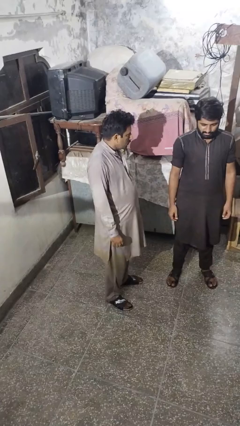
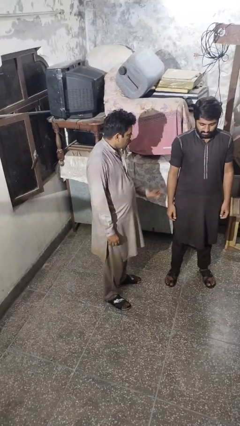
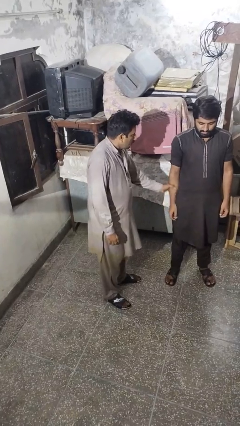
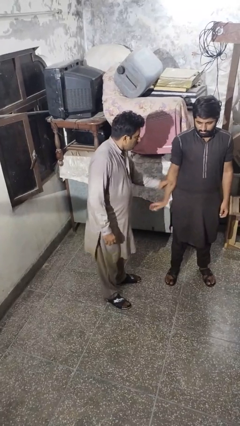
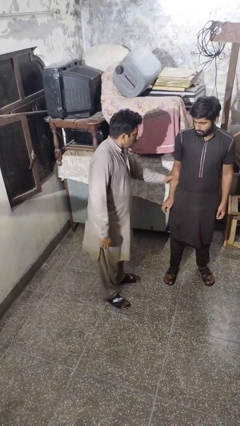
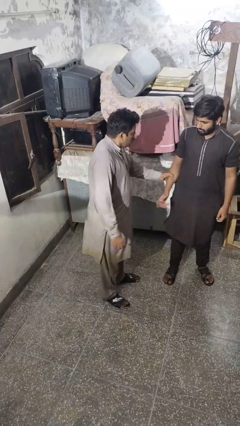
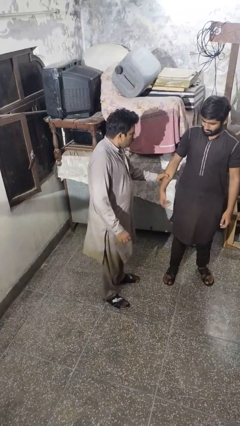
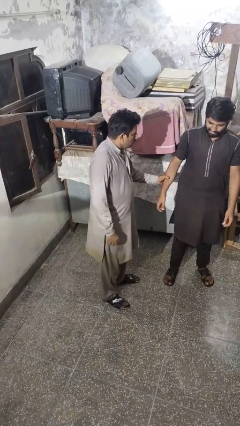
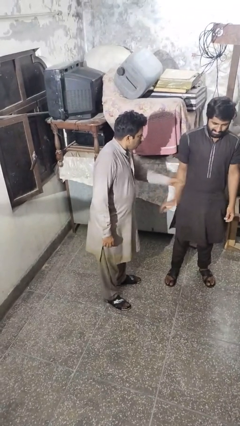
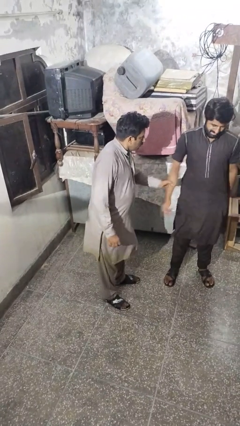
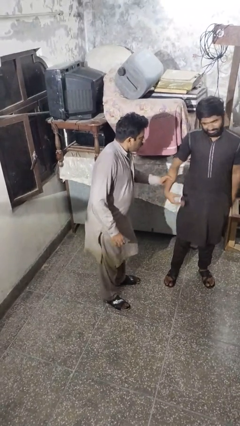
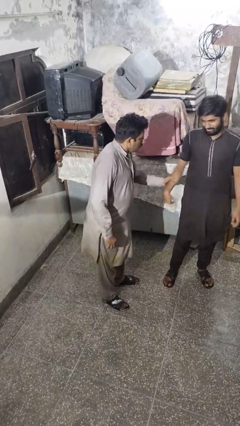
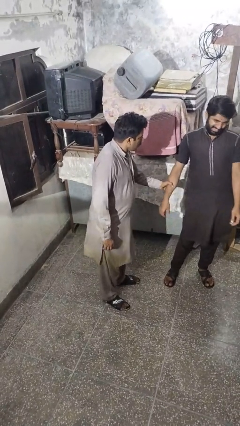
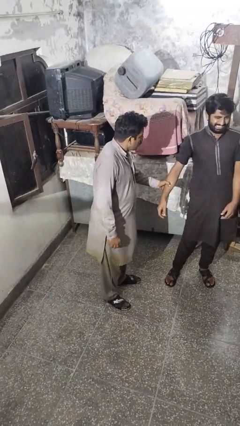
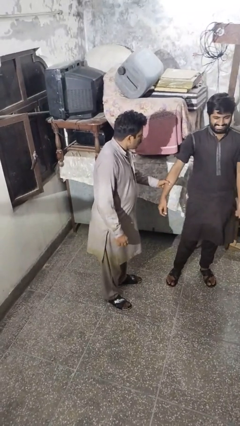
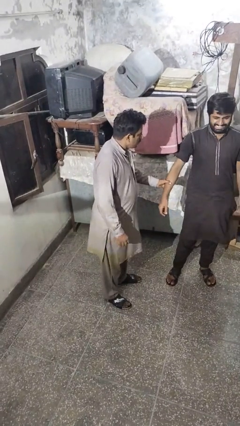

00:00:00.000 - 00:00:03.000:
person grabs person by forearm

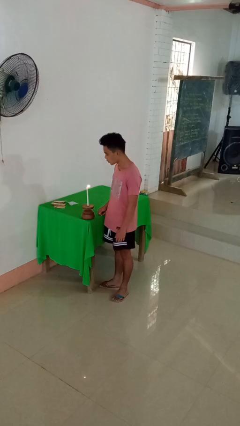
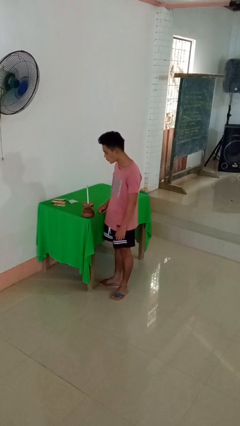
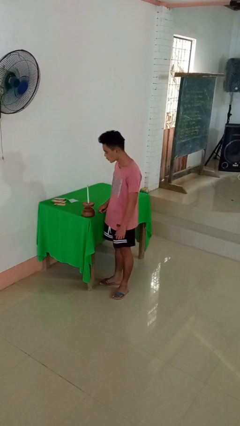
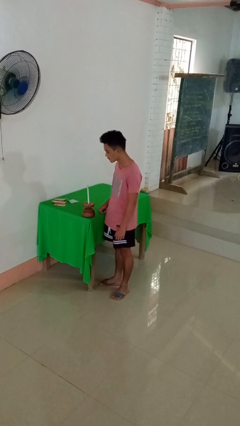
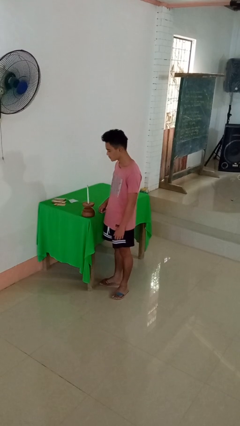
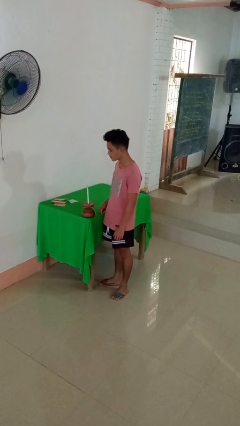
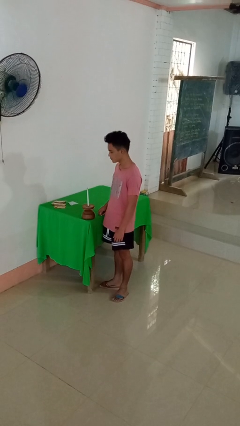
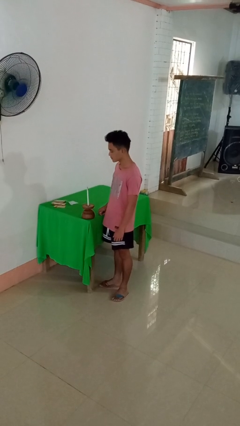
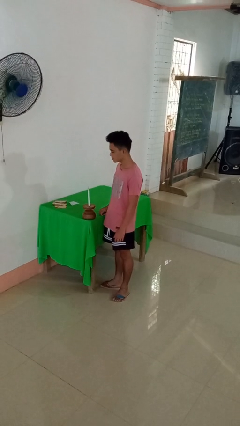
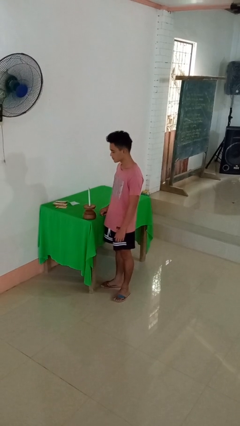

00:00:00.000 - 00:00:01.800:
person extinguishes candle

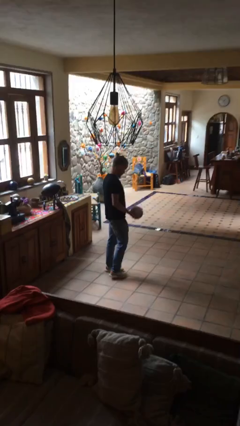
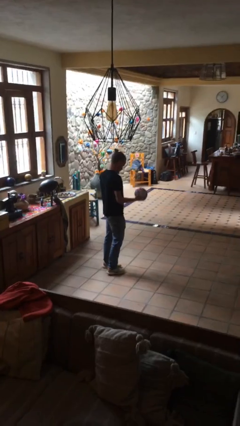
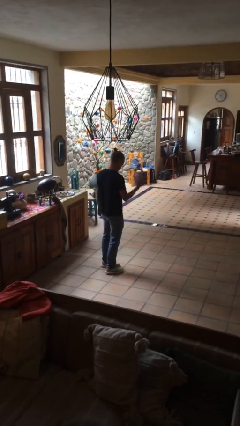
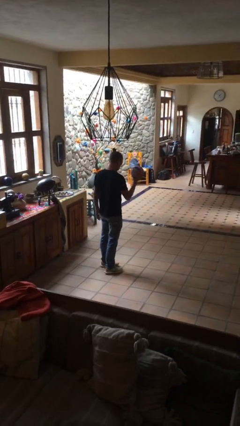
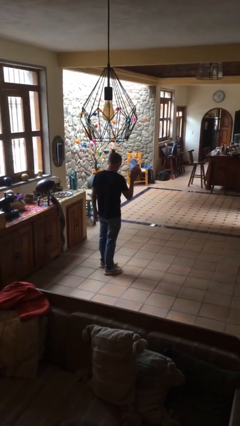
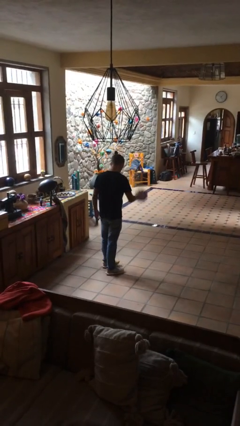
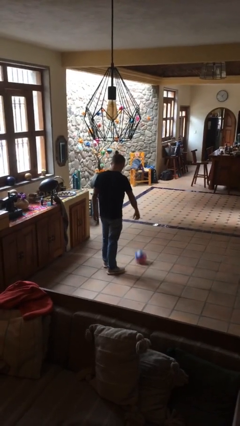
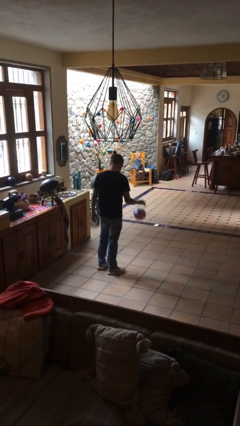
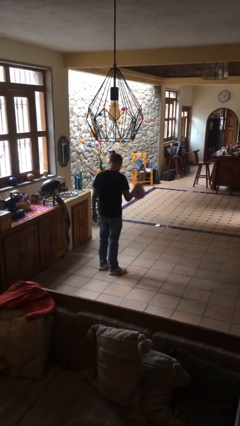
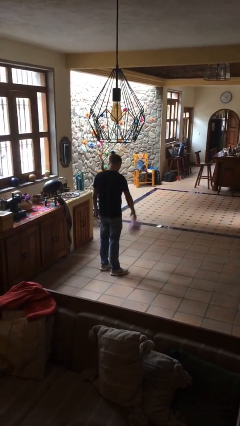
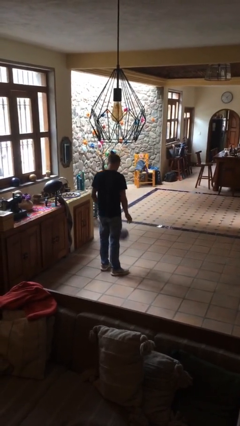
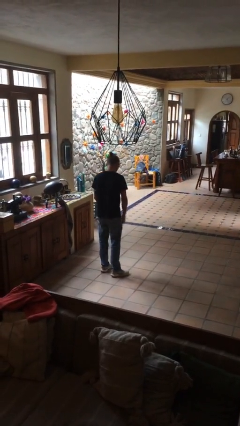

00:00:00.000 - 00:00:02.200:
person bounces ball on floor

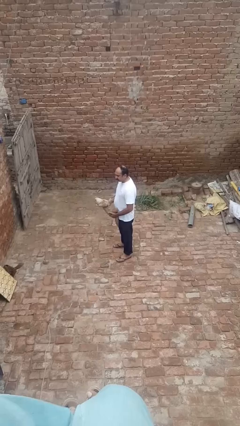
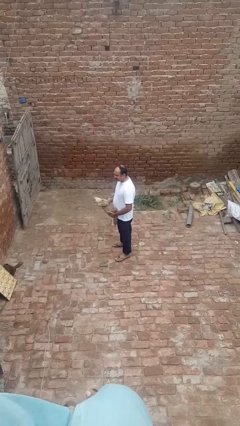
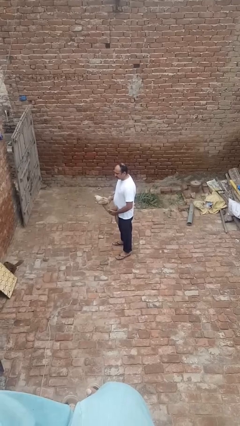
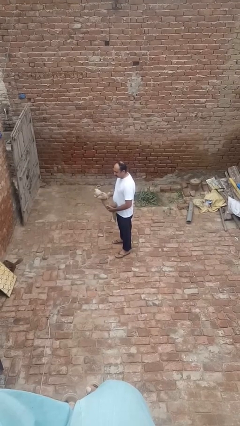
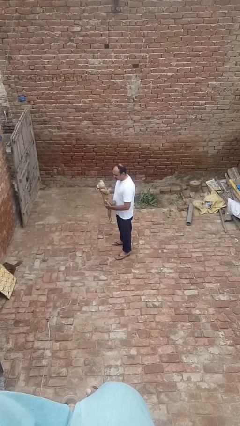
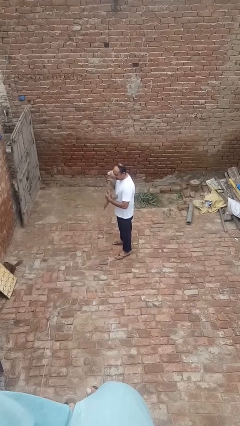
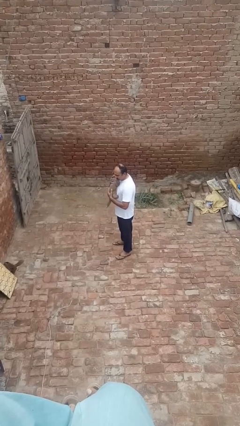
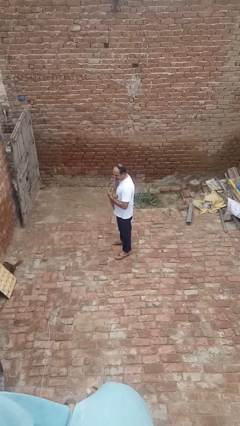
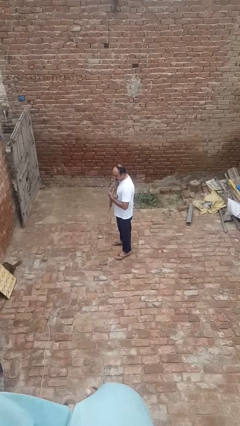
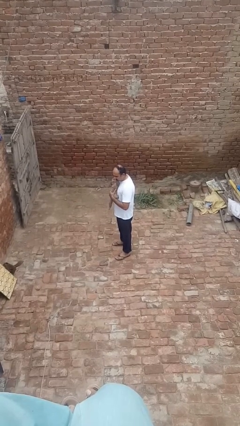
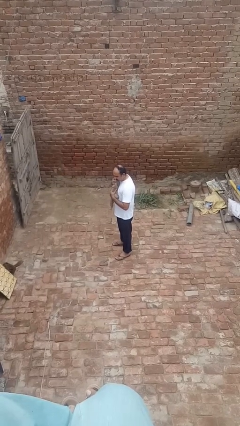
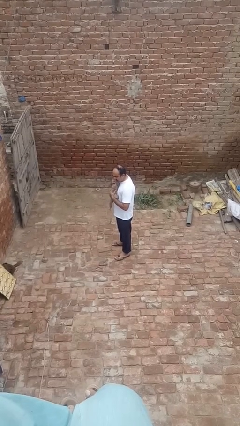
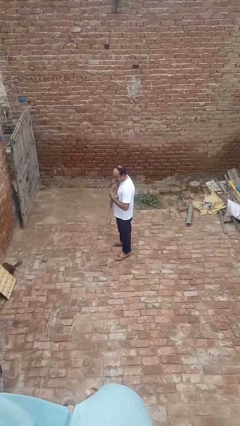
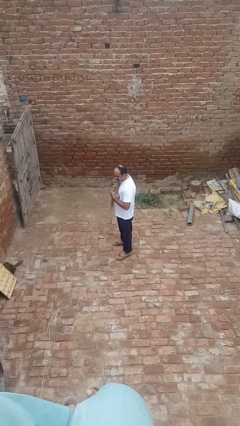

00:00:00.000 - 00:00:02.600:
person hugs stuffed animal

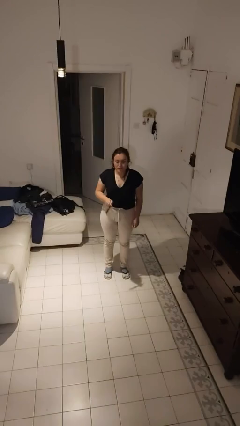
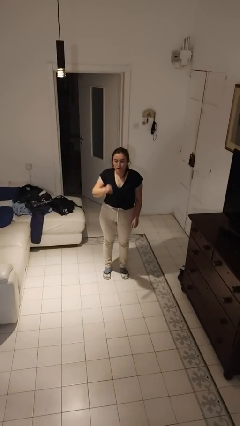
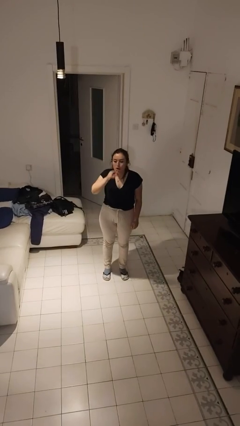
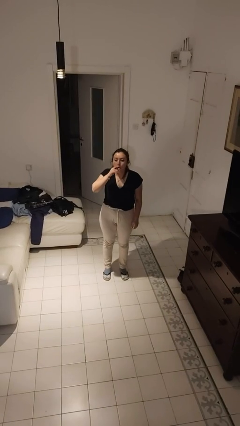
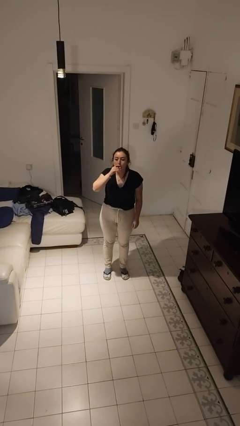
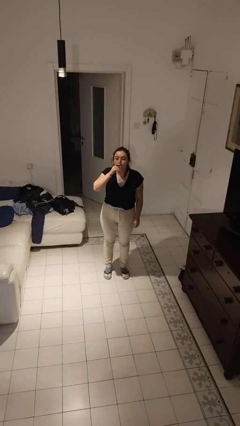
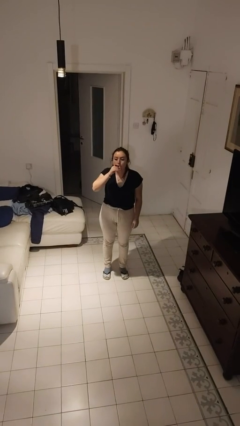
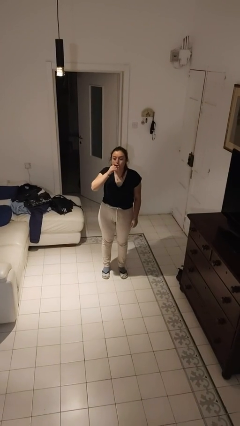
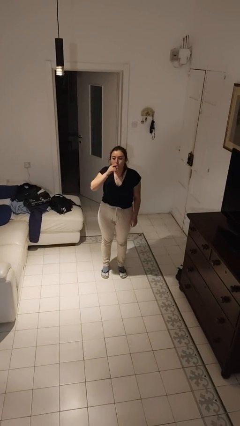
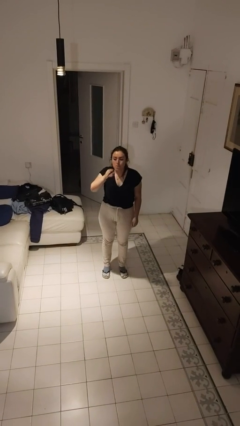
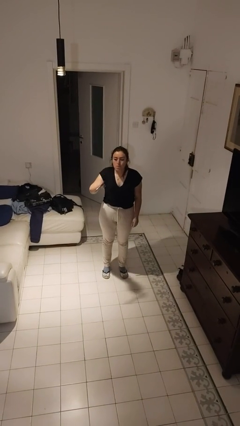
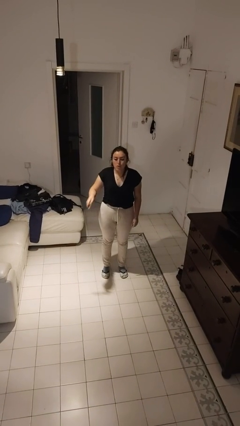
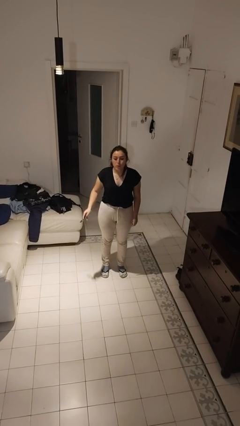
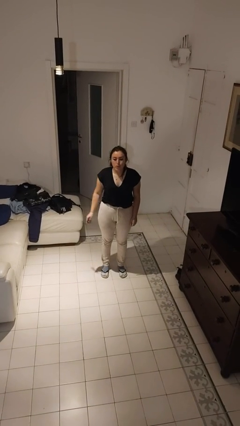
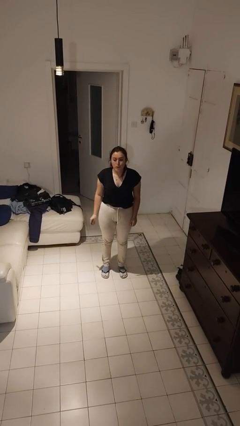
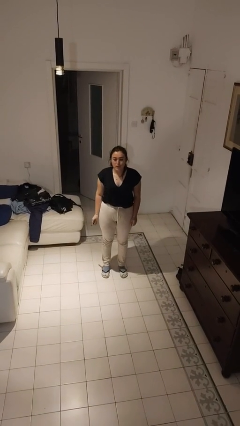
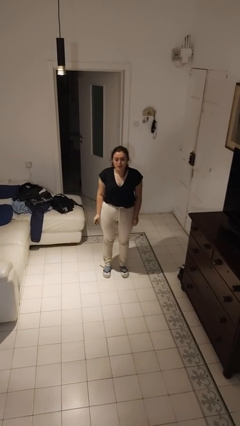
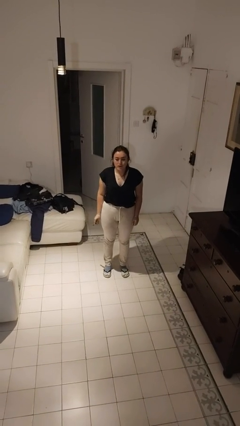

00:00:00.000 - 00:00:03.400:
person vapes

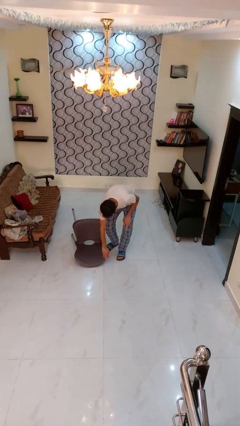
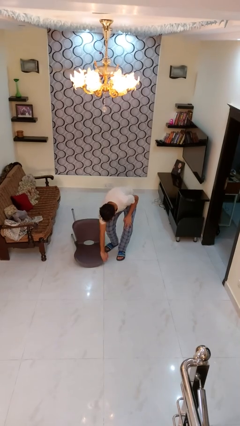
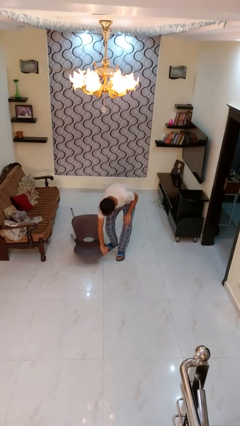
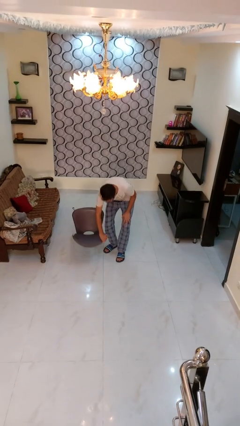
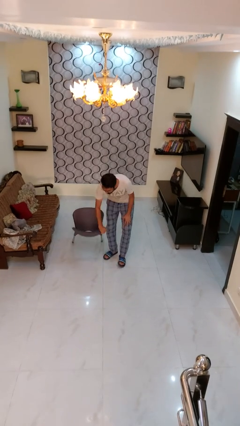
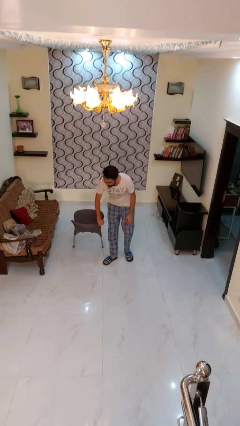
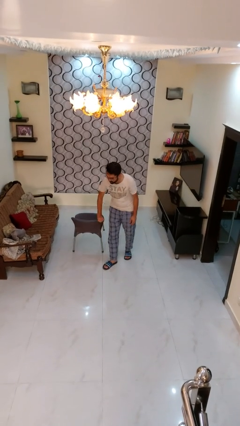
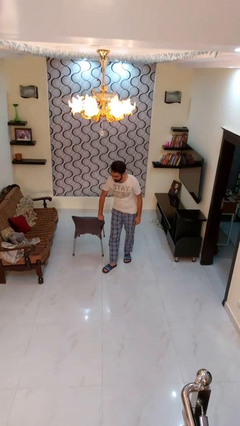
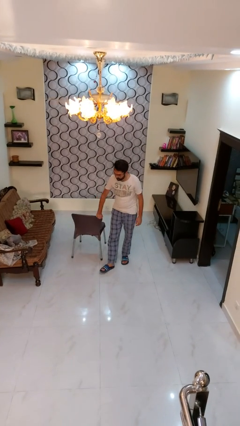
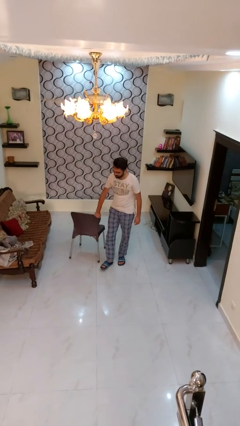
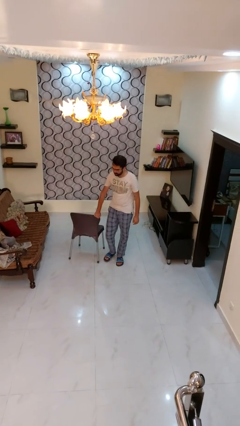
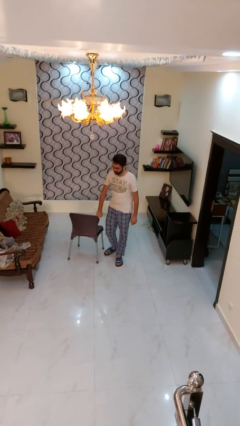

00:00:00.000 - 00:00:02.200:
person sets upright furniture

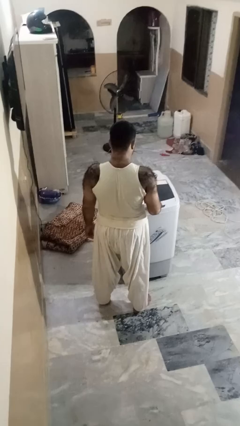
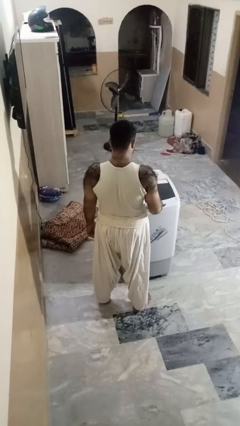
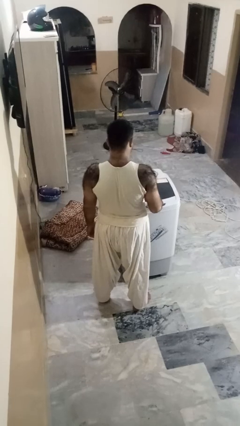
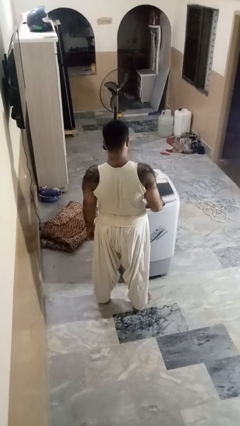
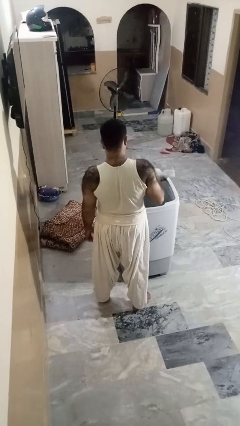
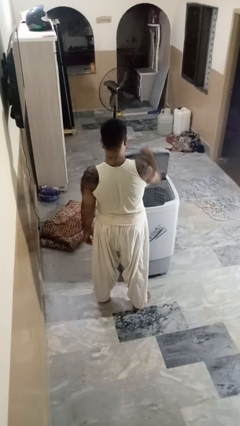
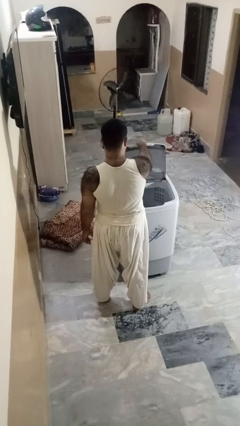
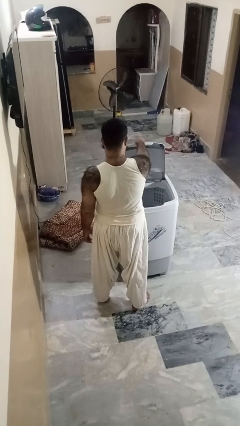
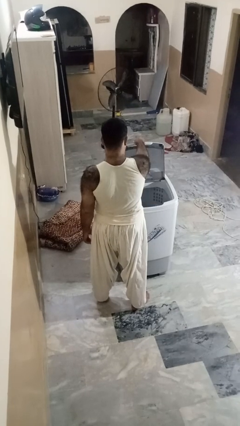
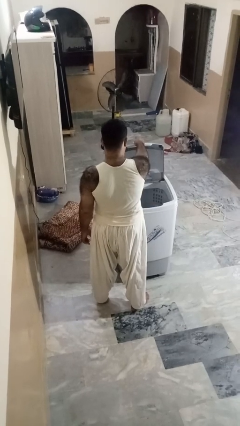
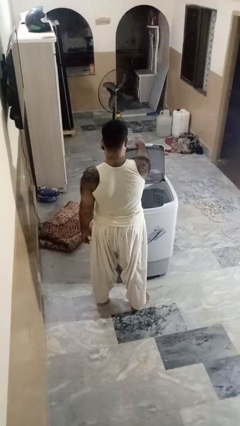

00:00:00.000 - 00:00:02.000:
person opens clothes washer
